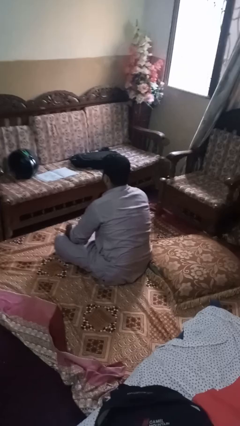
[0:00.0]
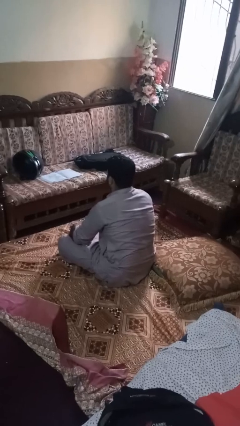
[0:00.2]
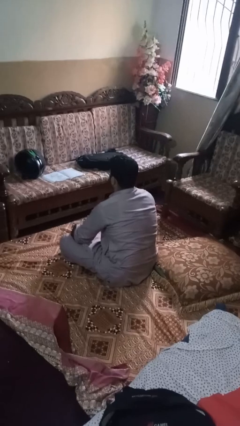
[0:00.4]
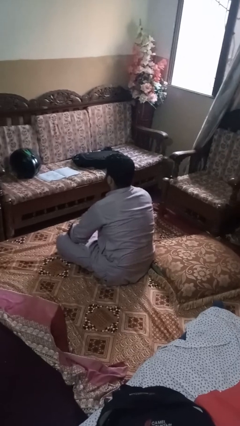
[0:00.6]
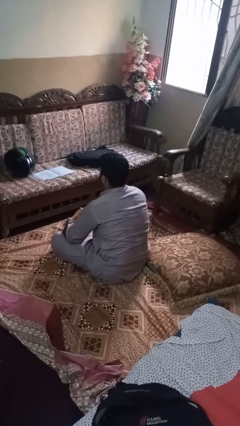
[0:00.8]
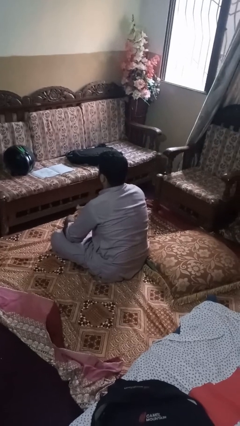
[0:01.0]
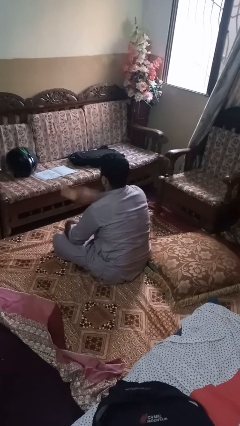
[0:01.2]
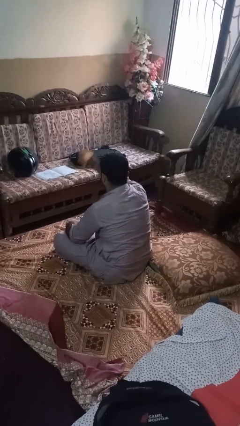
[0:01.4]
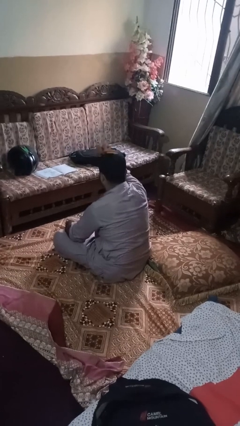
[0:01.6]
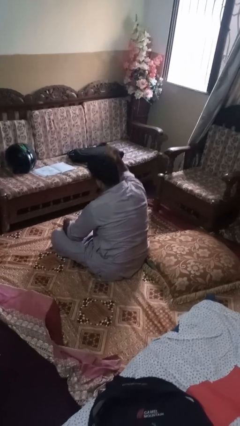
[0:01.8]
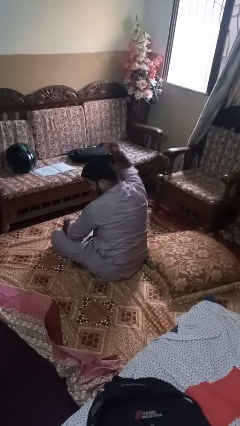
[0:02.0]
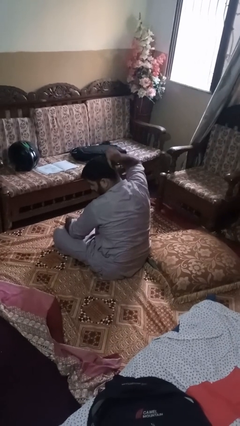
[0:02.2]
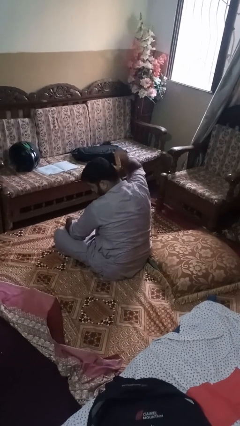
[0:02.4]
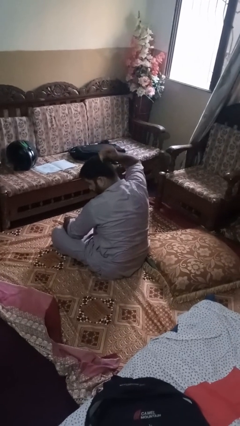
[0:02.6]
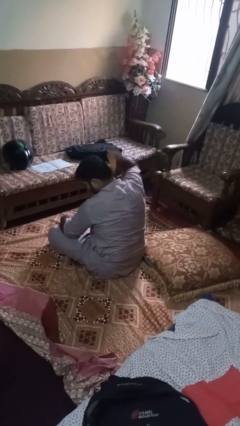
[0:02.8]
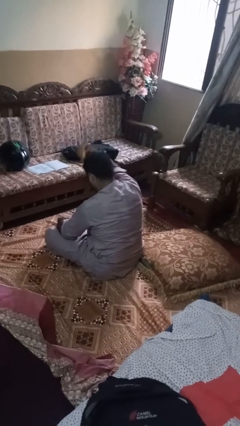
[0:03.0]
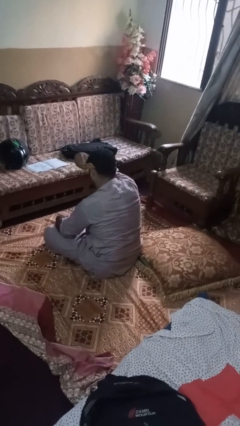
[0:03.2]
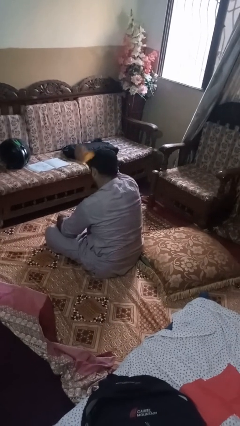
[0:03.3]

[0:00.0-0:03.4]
person brushes hair

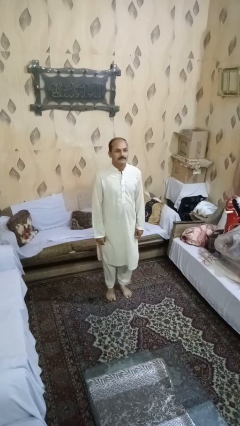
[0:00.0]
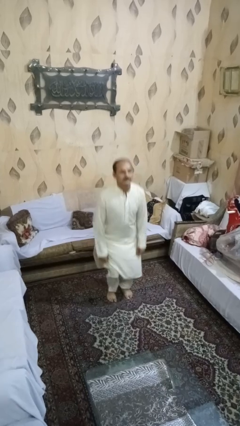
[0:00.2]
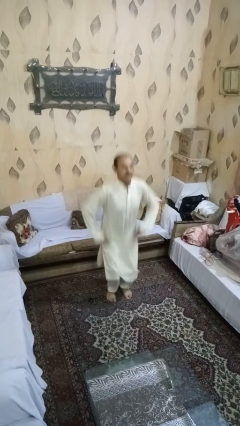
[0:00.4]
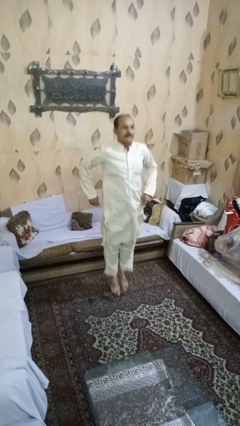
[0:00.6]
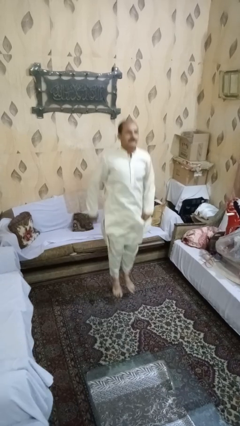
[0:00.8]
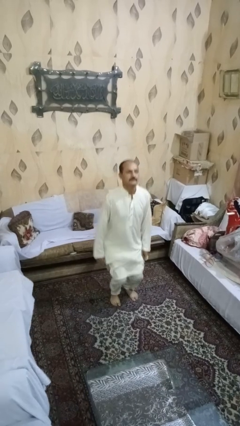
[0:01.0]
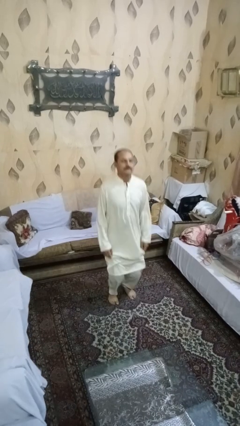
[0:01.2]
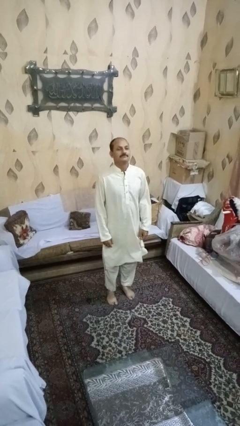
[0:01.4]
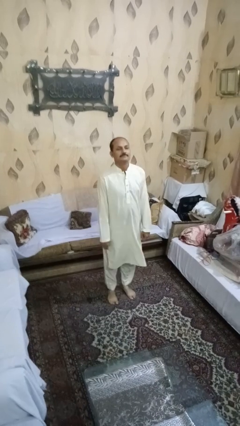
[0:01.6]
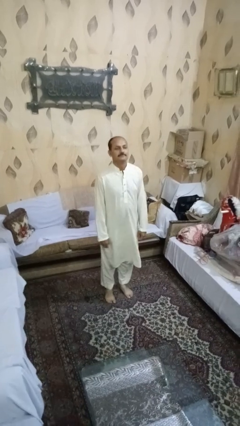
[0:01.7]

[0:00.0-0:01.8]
person jumps

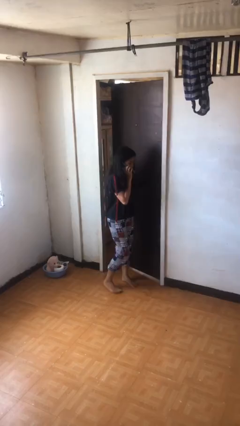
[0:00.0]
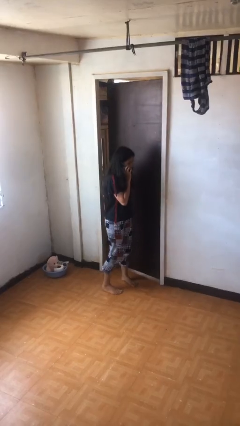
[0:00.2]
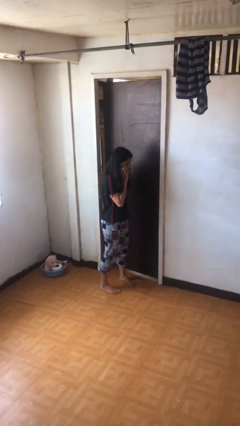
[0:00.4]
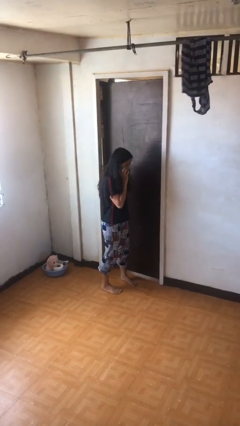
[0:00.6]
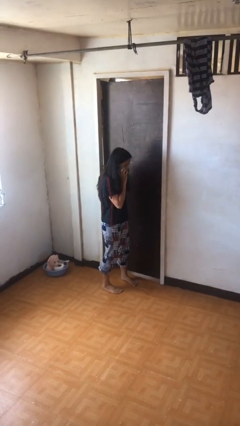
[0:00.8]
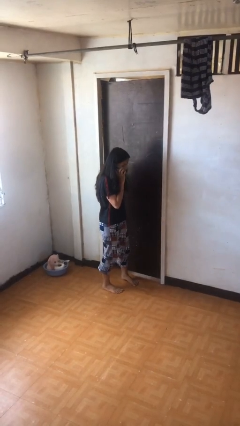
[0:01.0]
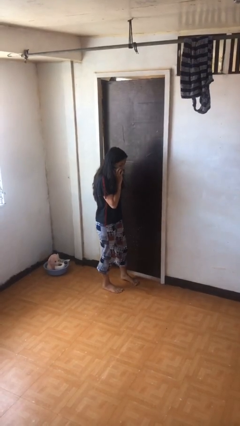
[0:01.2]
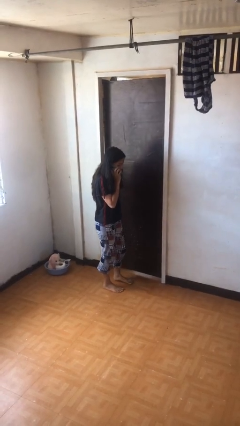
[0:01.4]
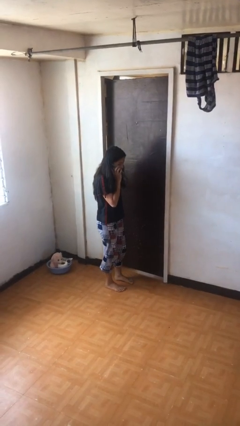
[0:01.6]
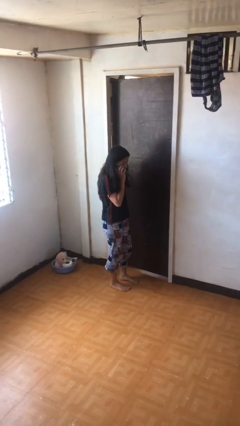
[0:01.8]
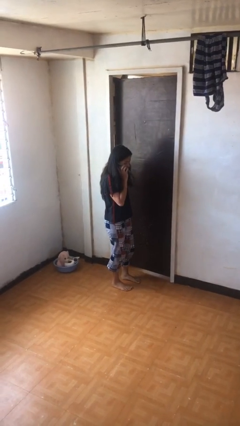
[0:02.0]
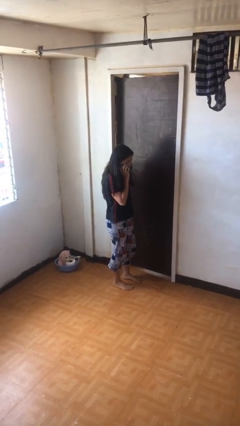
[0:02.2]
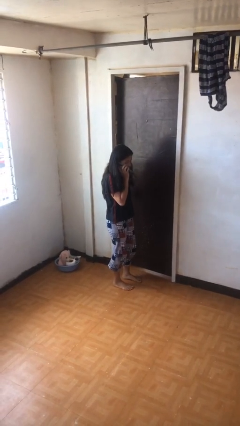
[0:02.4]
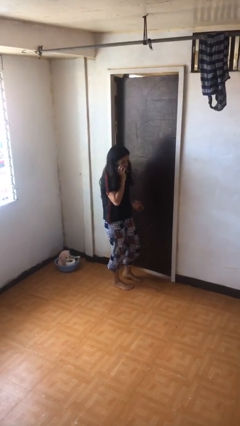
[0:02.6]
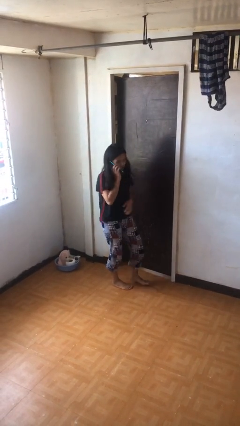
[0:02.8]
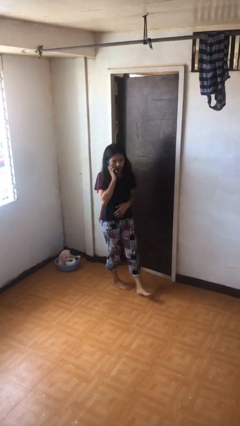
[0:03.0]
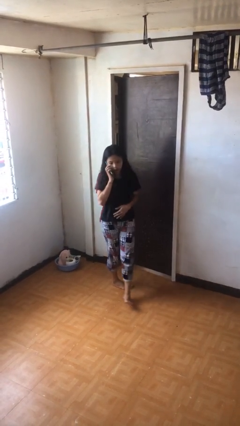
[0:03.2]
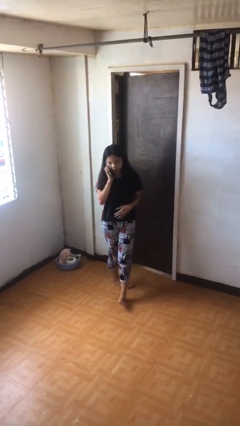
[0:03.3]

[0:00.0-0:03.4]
person closes facility door

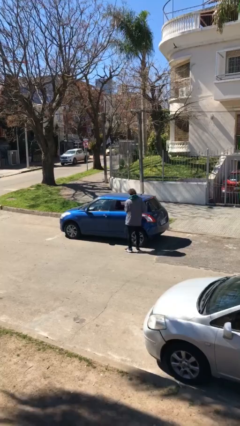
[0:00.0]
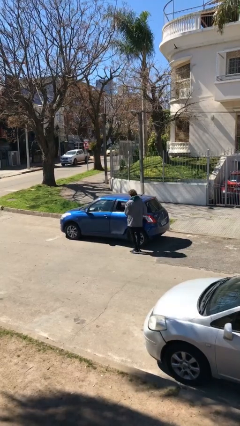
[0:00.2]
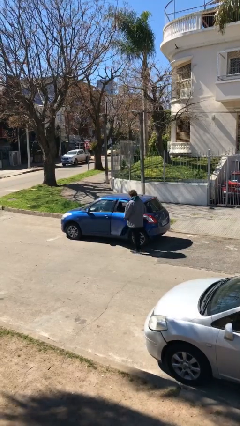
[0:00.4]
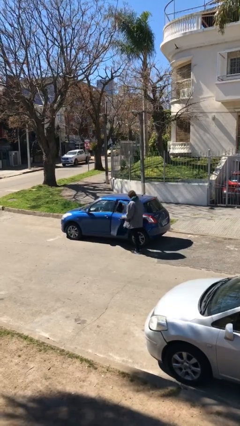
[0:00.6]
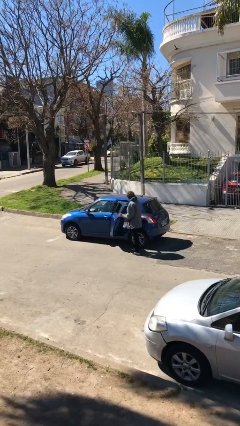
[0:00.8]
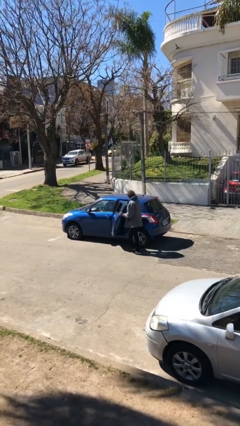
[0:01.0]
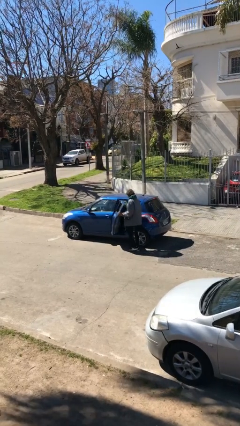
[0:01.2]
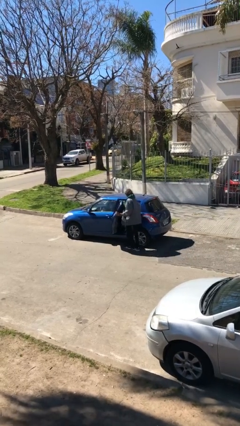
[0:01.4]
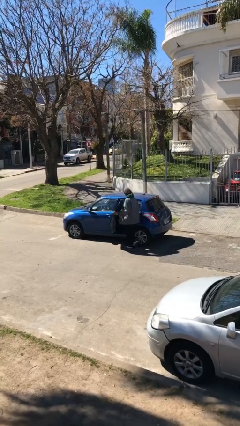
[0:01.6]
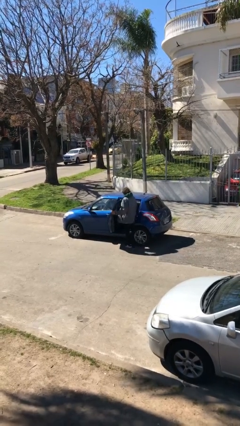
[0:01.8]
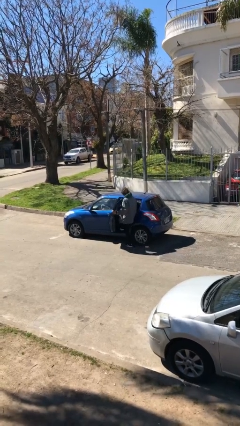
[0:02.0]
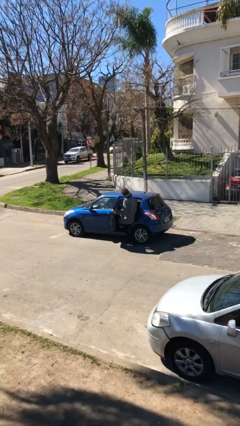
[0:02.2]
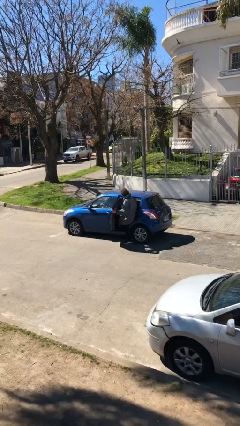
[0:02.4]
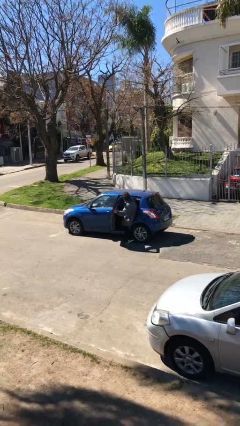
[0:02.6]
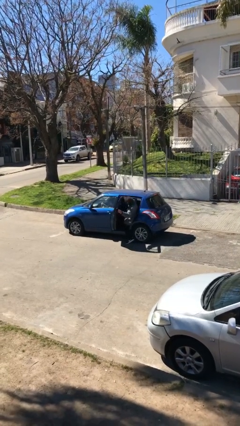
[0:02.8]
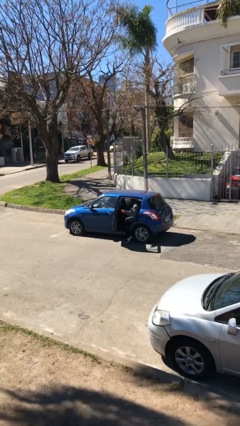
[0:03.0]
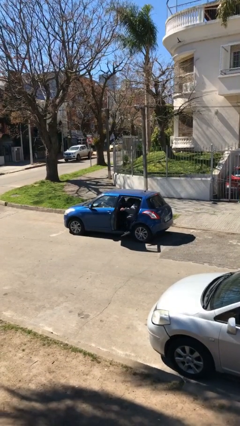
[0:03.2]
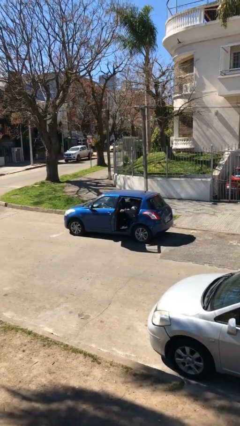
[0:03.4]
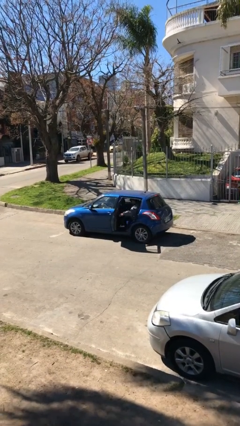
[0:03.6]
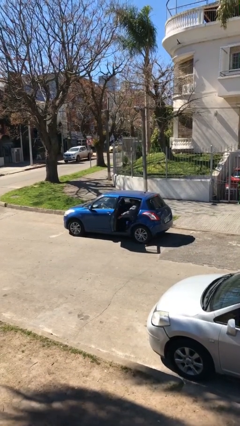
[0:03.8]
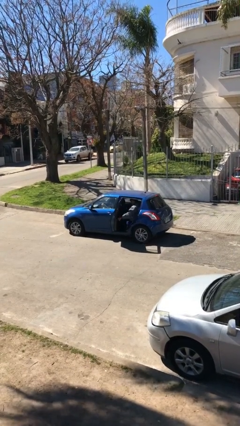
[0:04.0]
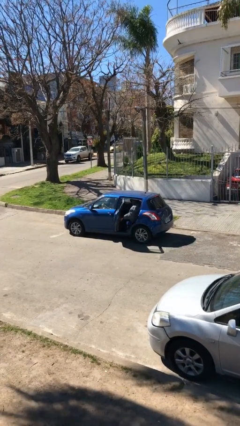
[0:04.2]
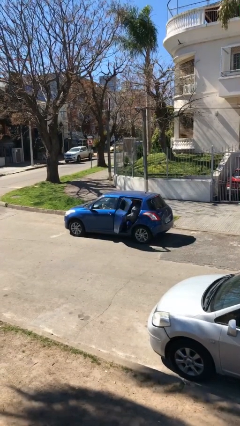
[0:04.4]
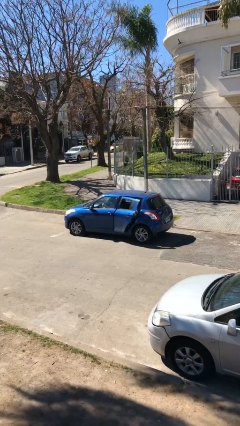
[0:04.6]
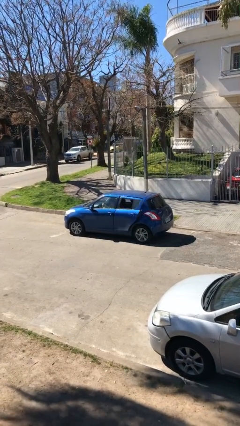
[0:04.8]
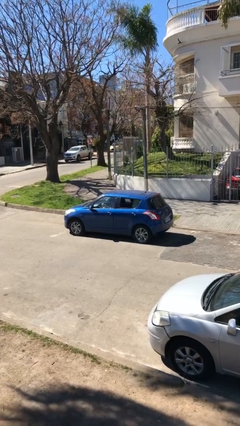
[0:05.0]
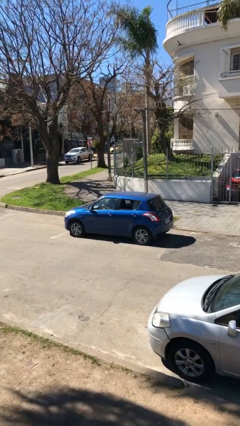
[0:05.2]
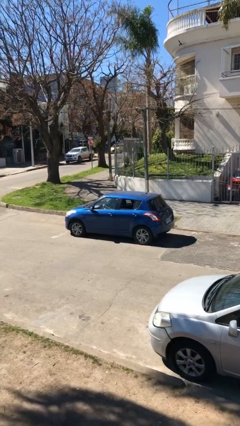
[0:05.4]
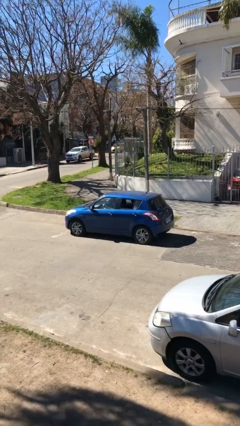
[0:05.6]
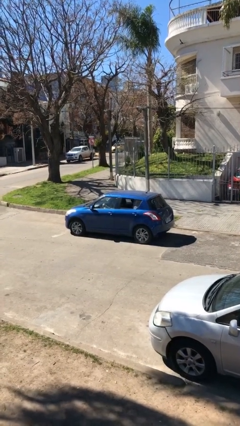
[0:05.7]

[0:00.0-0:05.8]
car picks up person

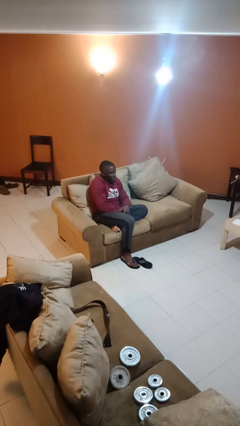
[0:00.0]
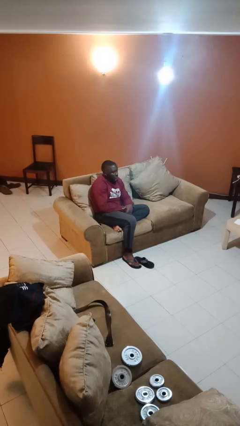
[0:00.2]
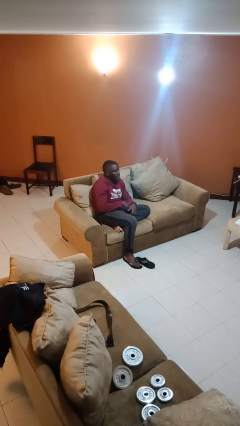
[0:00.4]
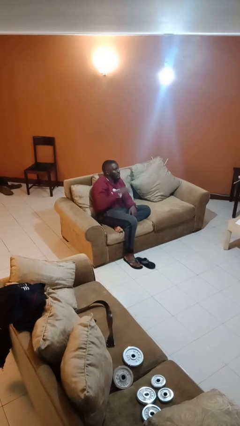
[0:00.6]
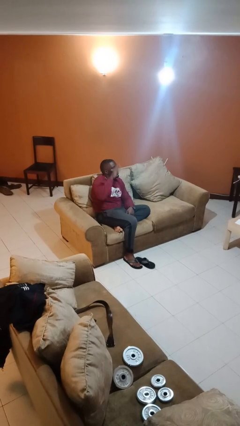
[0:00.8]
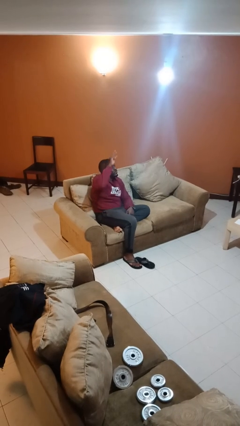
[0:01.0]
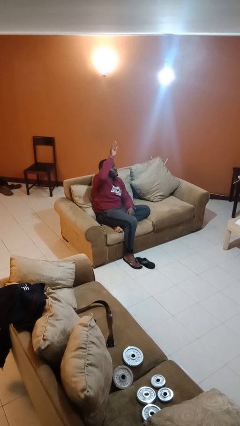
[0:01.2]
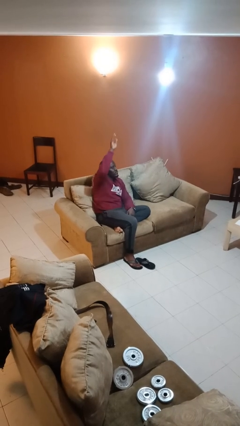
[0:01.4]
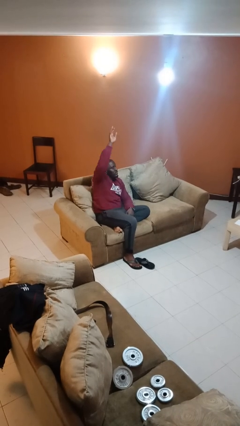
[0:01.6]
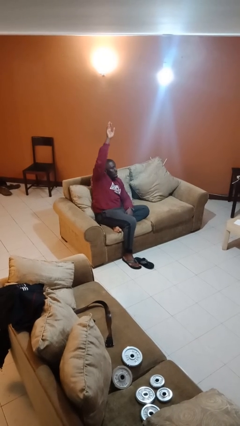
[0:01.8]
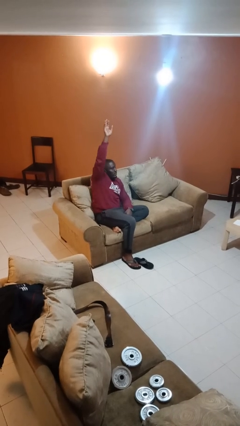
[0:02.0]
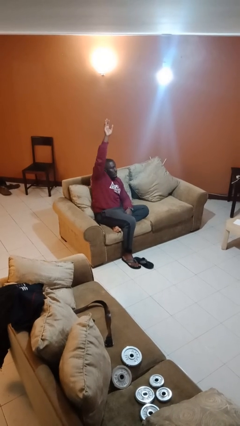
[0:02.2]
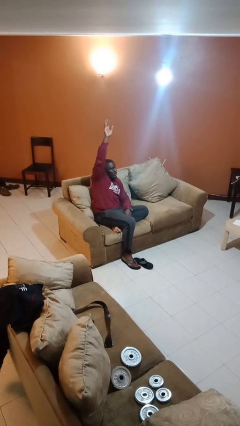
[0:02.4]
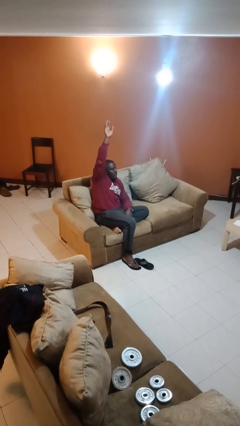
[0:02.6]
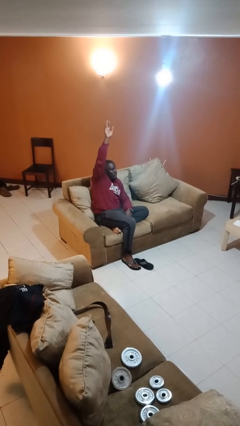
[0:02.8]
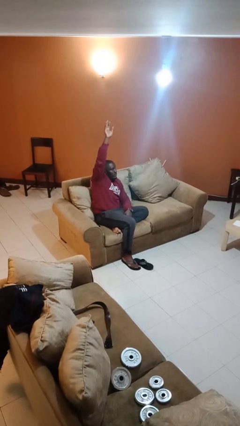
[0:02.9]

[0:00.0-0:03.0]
person gestures raise hand

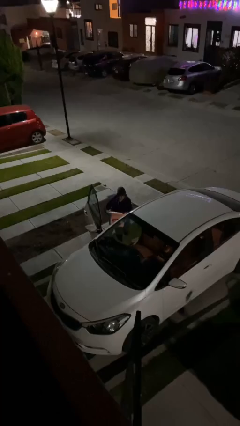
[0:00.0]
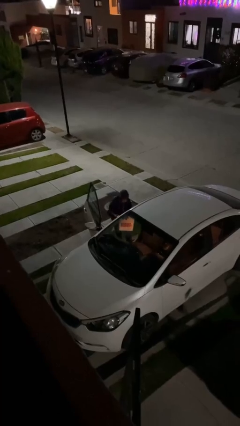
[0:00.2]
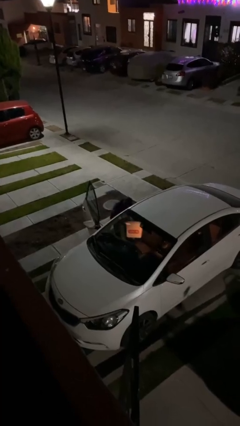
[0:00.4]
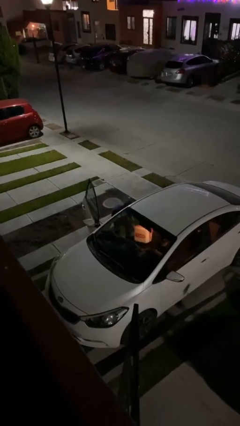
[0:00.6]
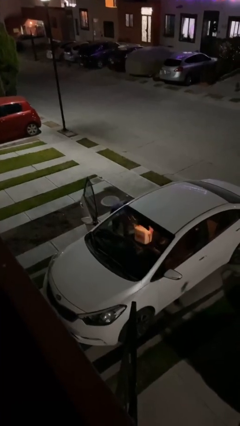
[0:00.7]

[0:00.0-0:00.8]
person loads car
